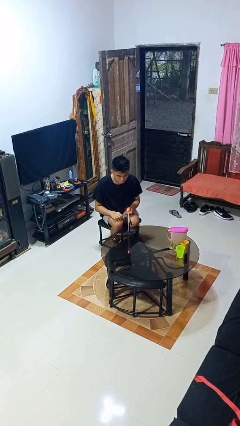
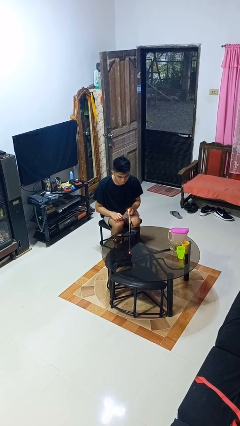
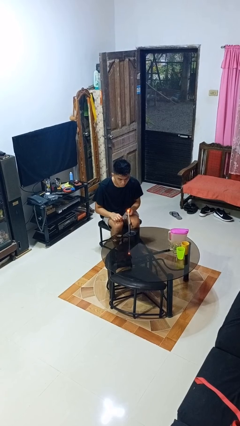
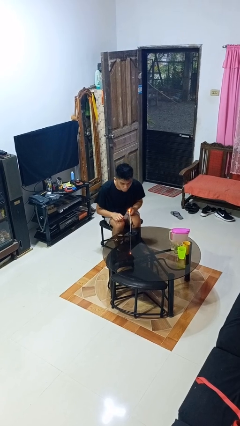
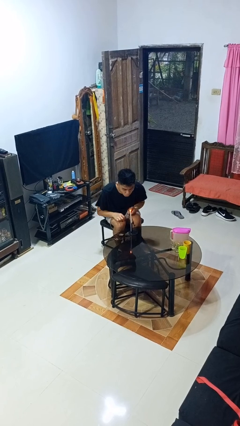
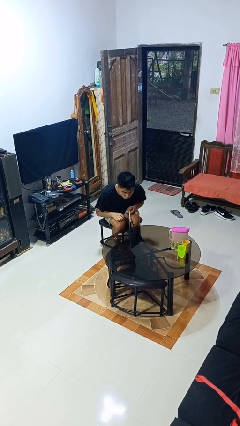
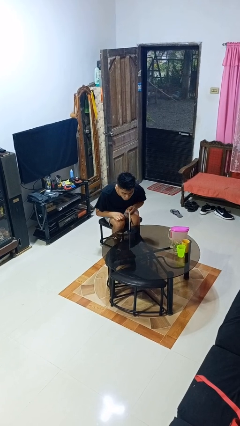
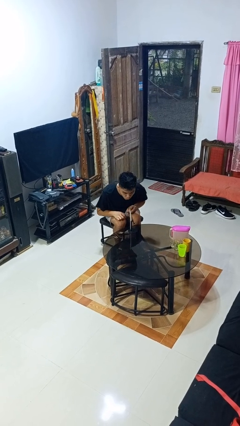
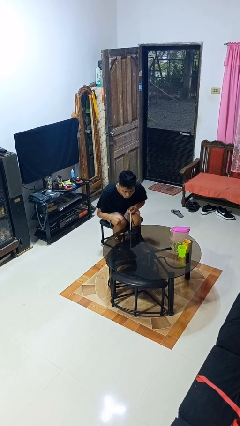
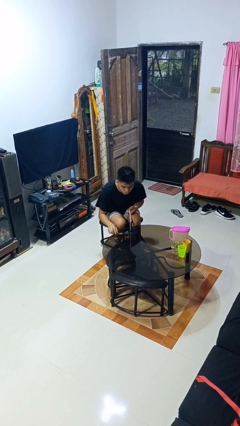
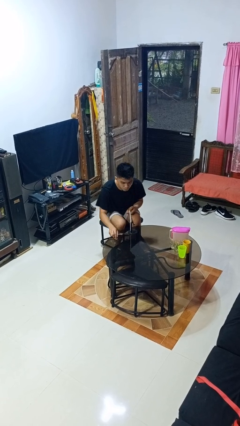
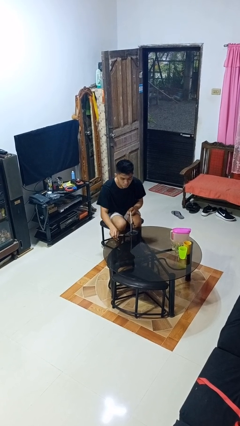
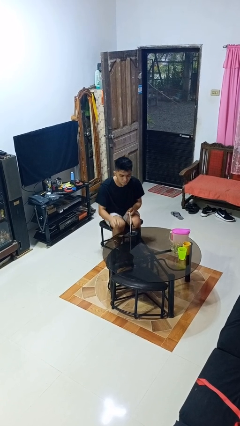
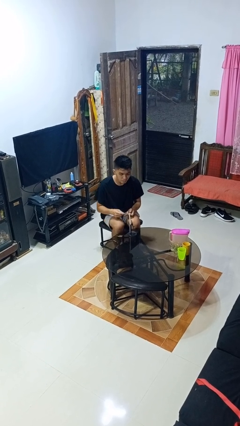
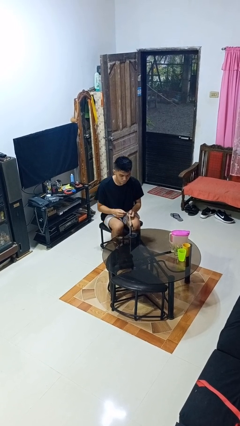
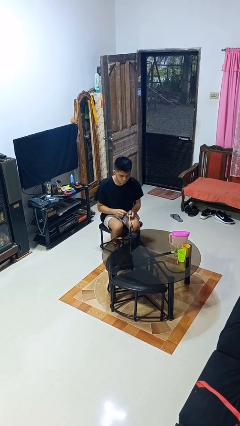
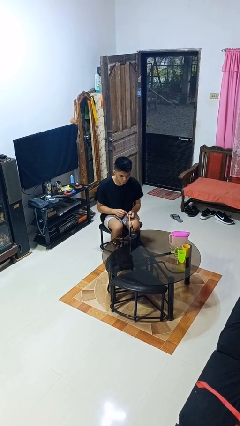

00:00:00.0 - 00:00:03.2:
person extinguishes candle

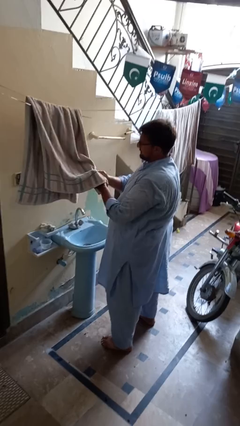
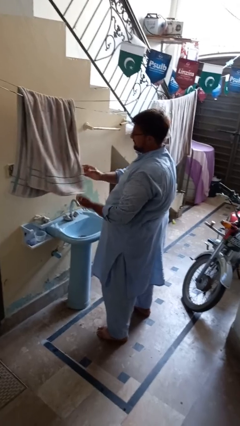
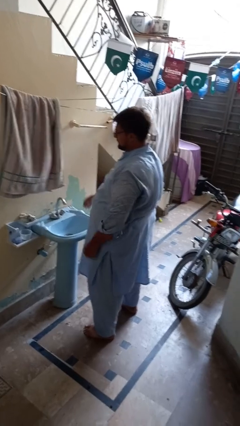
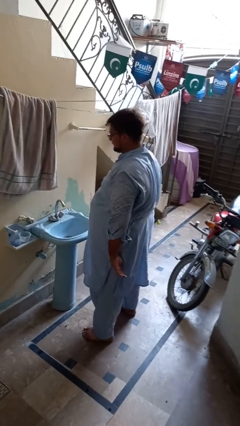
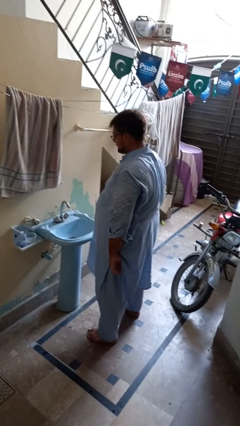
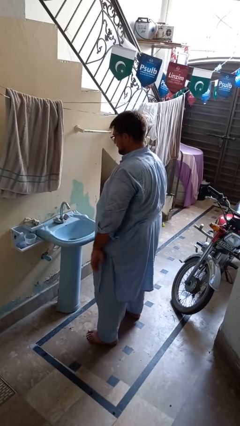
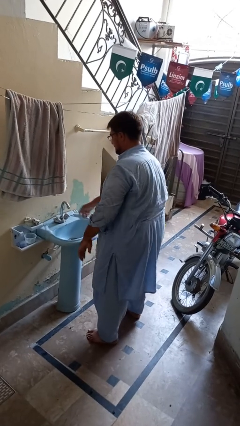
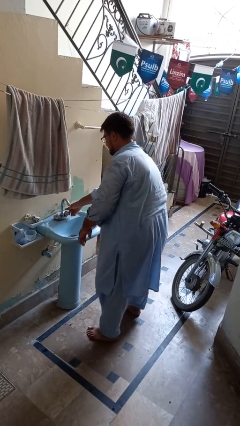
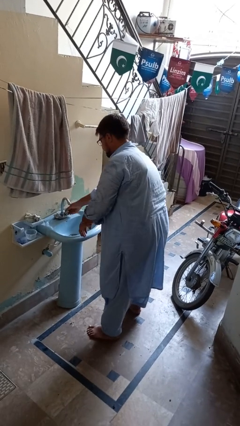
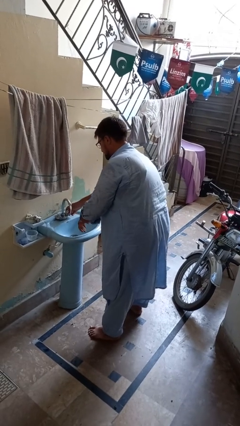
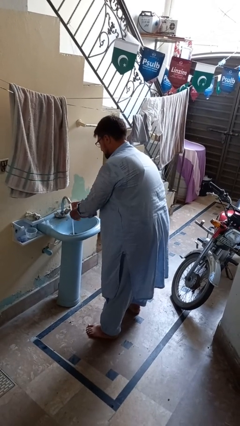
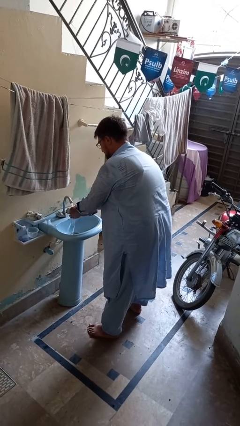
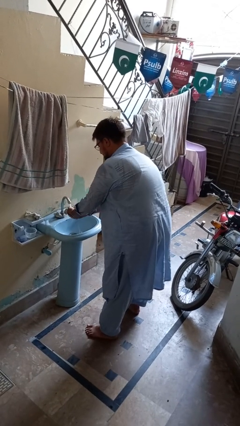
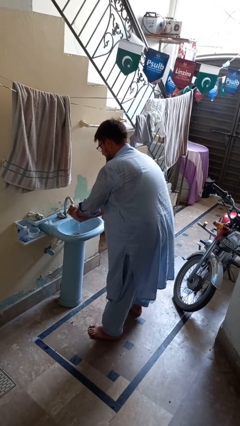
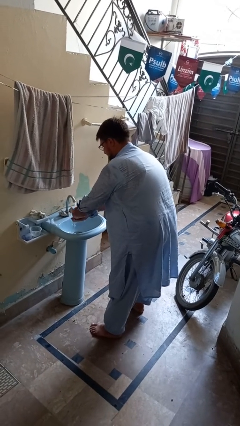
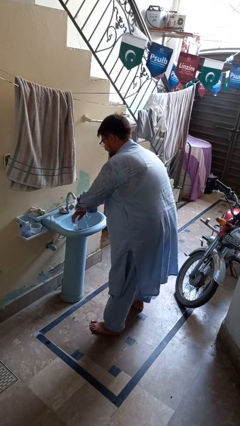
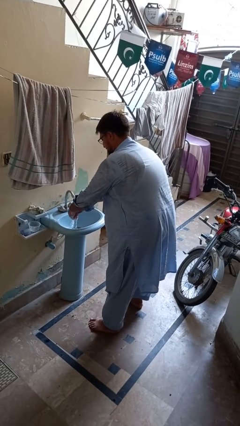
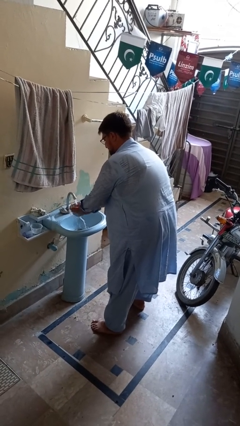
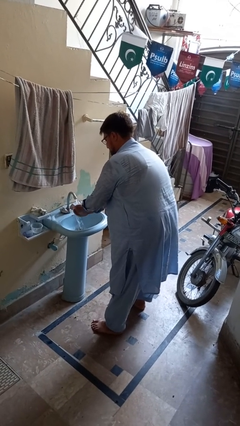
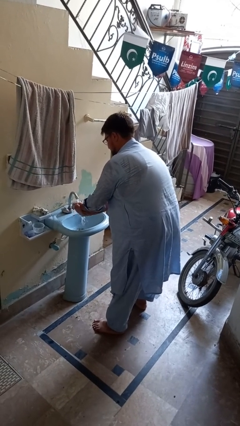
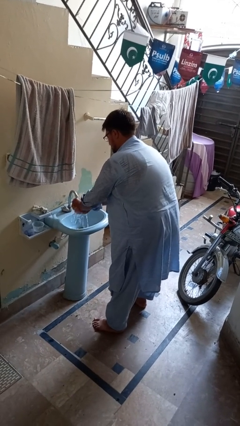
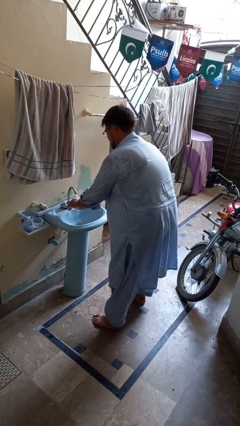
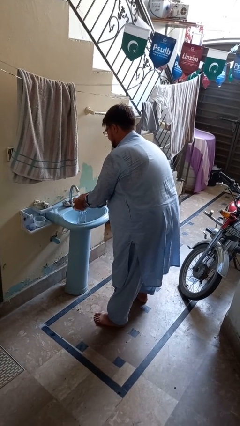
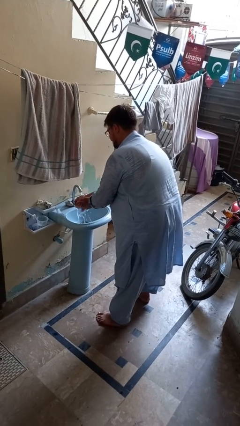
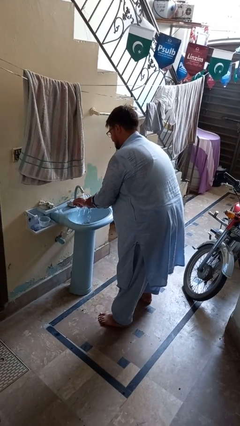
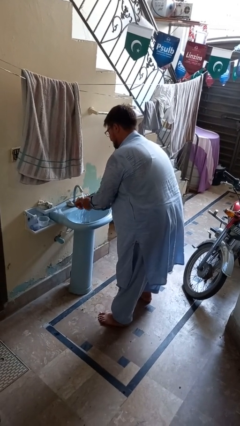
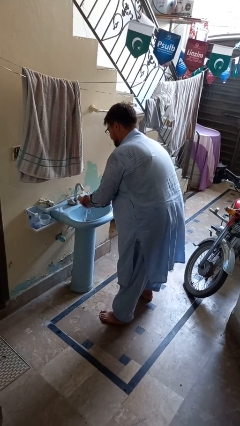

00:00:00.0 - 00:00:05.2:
person washes hands

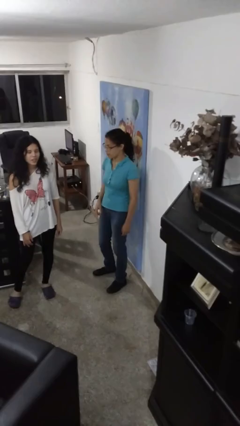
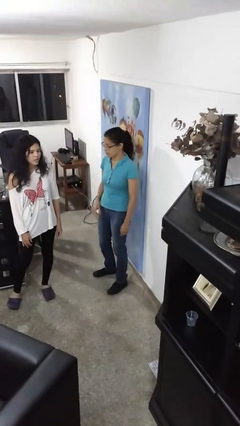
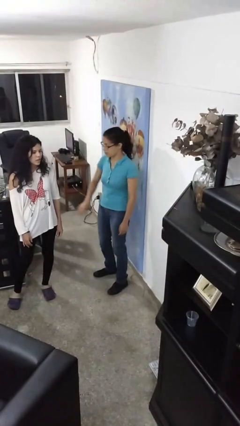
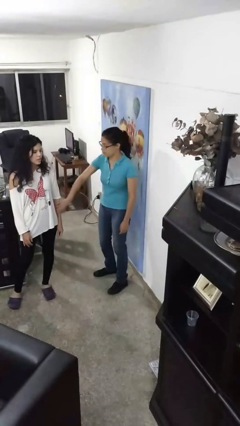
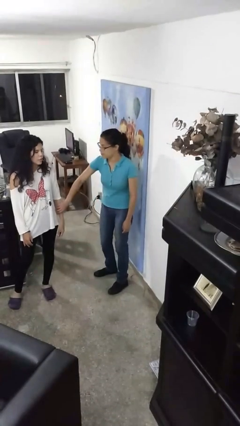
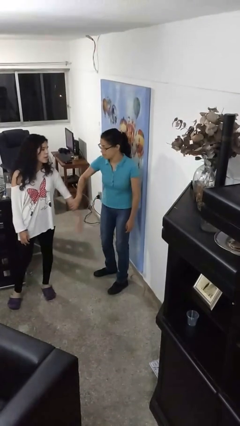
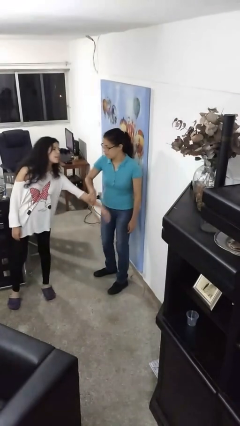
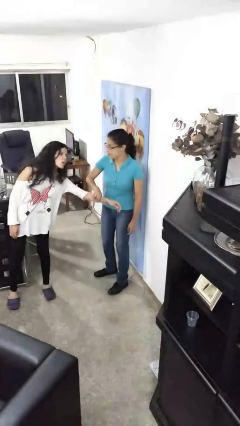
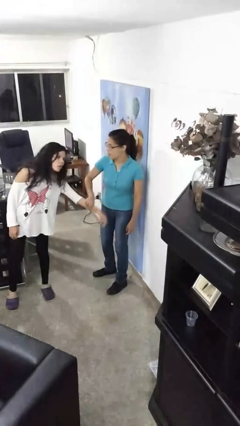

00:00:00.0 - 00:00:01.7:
person grabs person by forearm

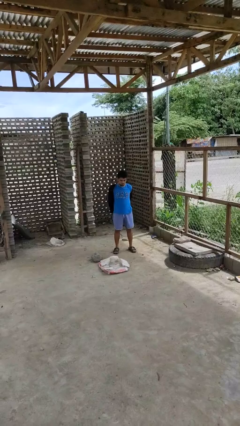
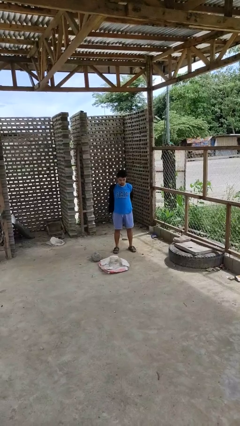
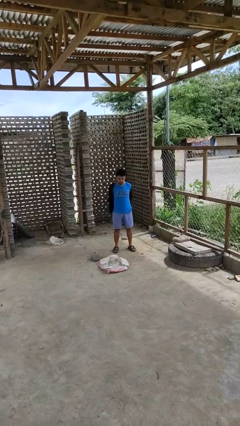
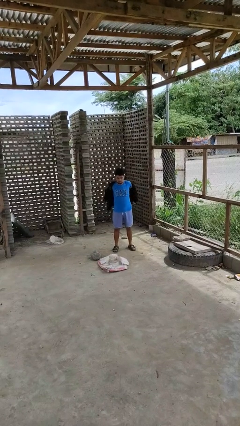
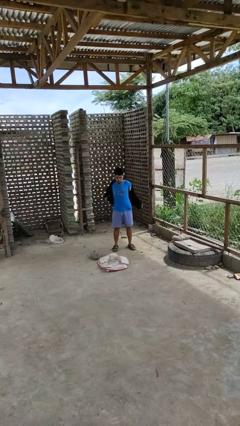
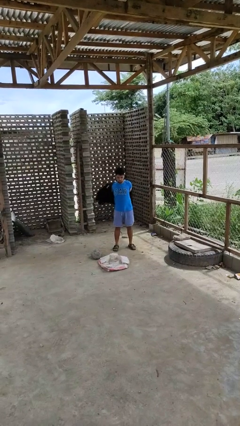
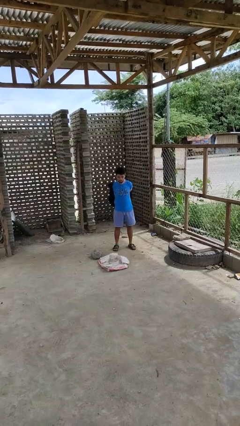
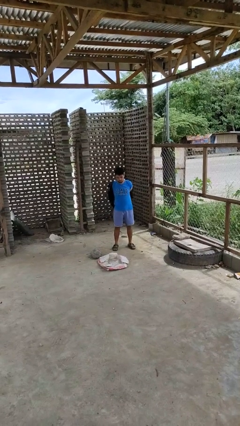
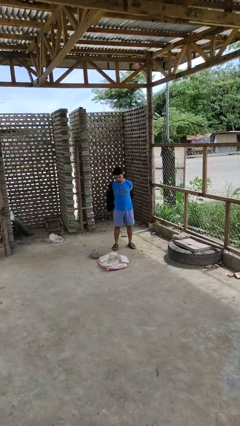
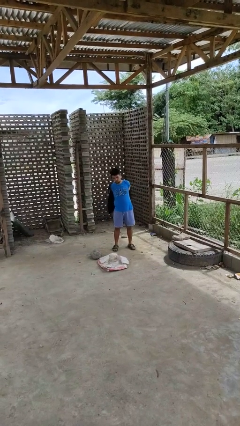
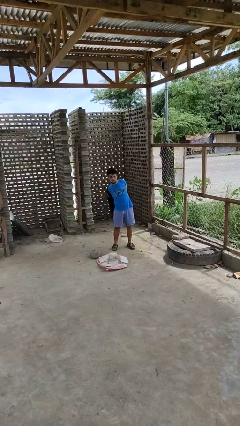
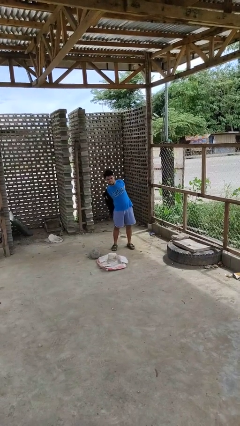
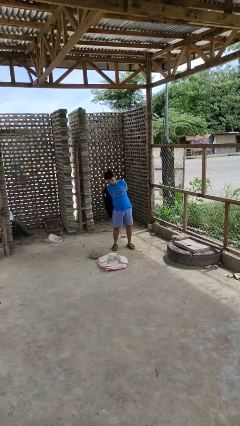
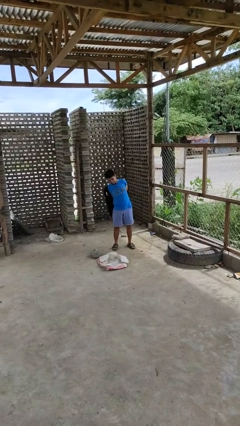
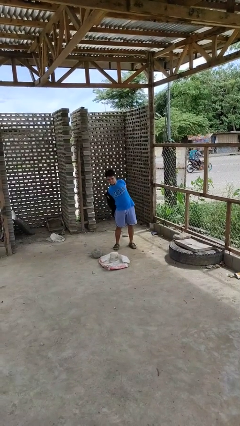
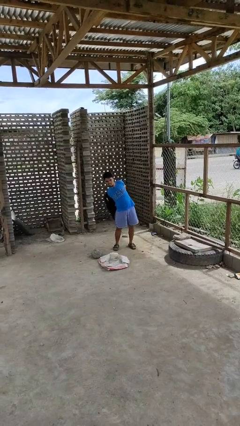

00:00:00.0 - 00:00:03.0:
person takes off jacket

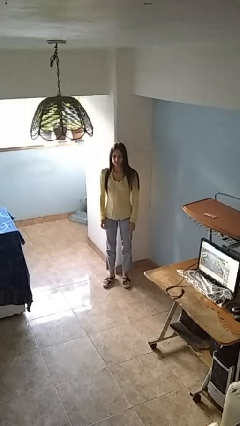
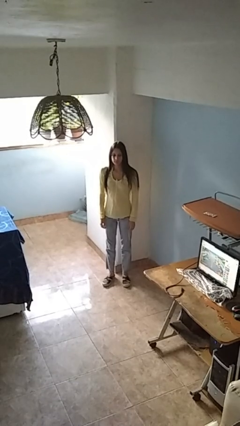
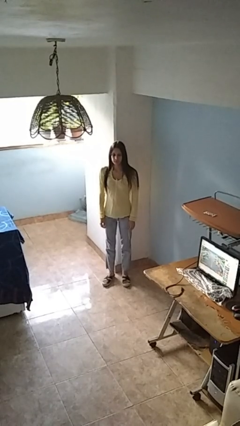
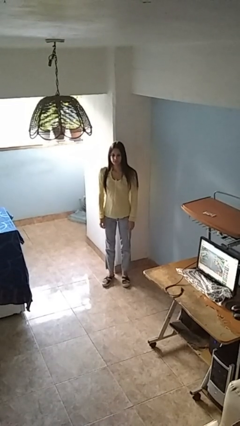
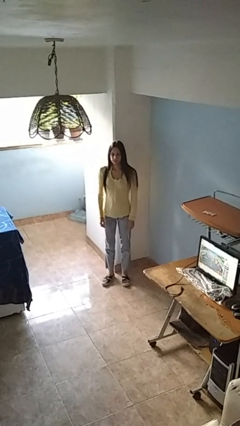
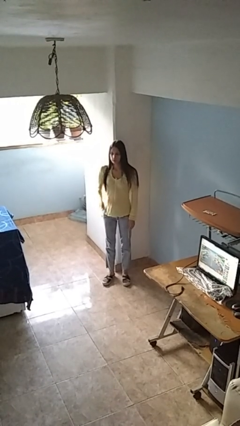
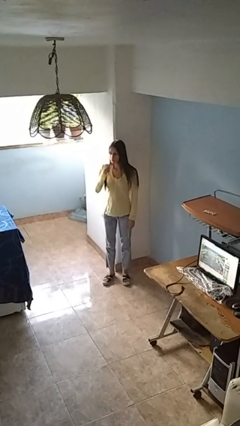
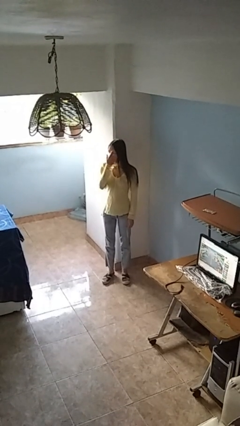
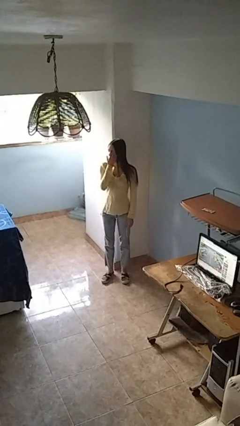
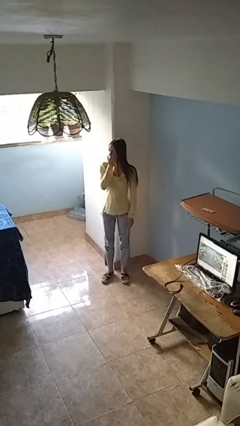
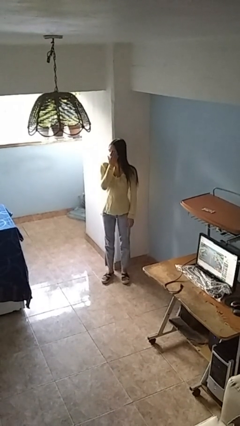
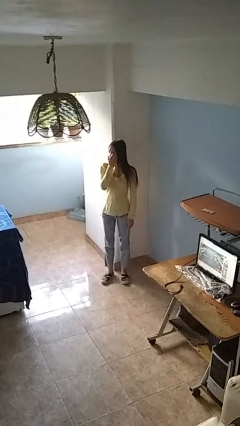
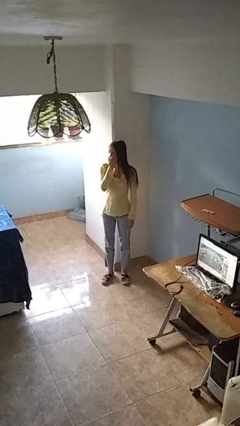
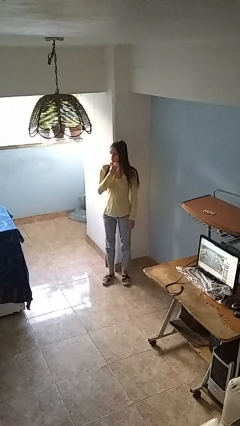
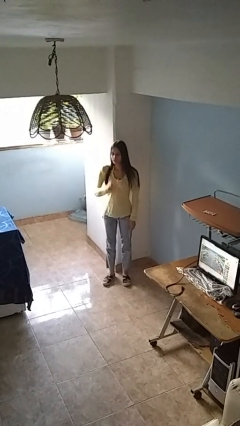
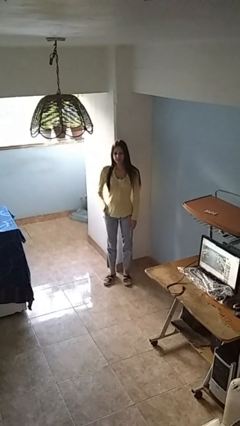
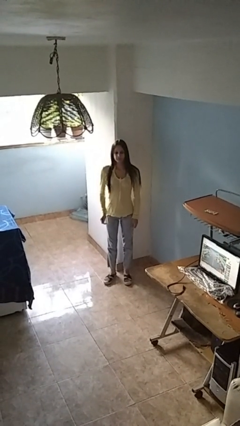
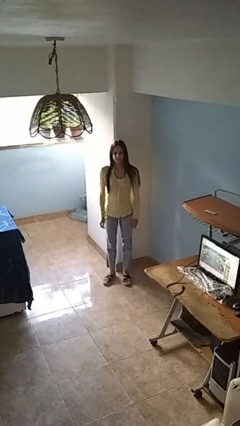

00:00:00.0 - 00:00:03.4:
person scratches face

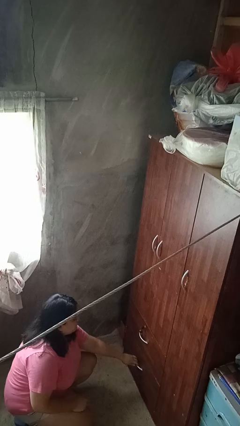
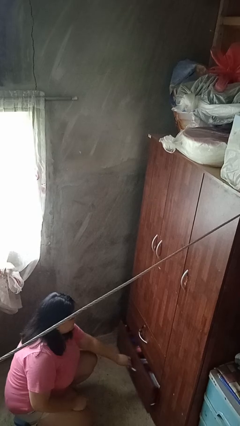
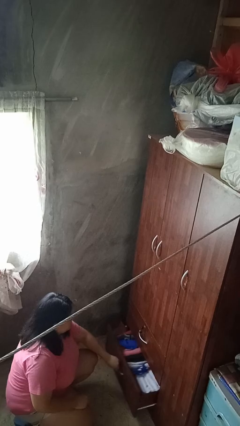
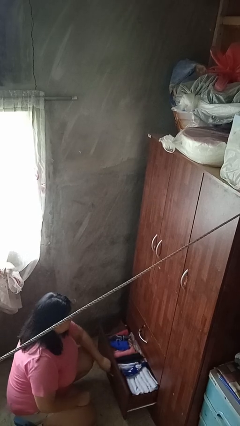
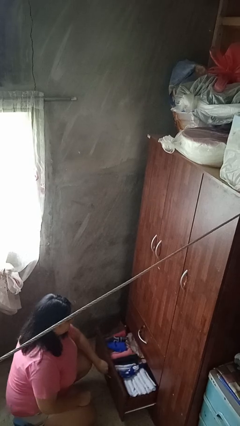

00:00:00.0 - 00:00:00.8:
person opens dresser drawer
